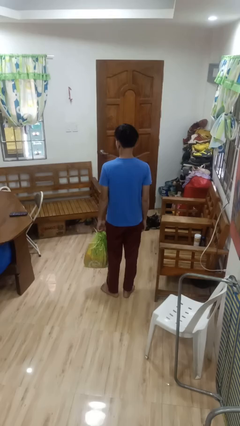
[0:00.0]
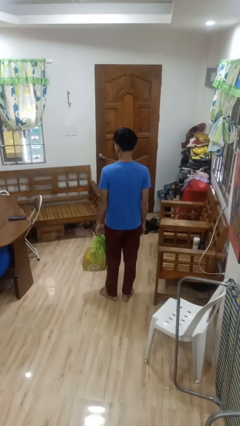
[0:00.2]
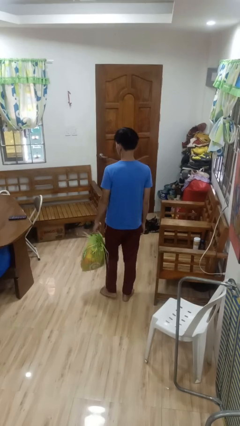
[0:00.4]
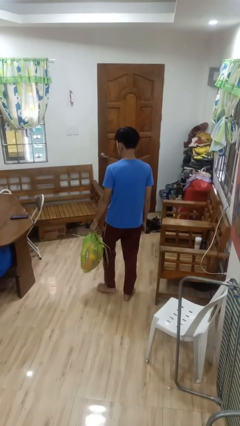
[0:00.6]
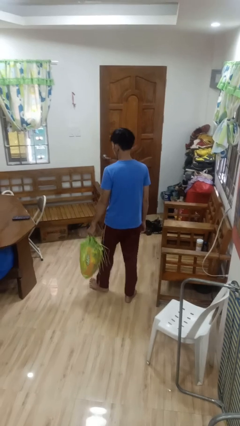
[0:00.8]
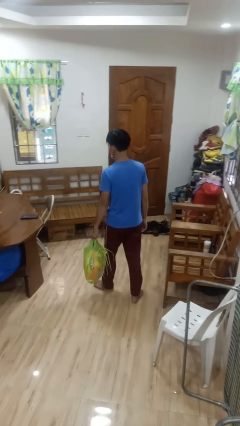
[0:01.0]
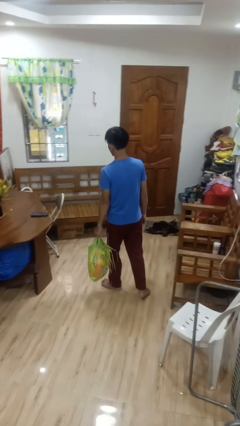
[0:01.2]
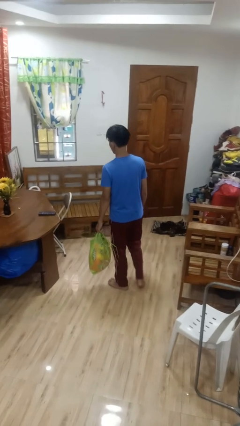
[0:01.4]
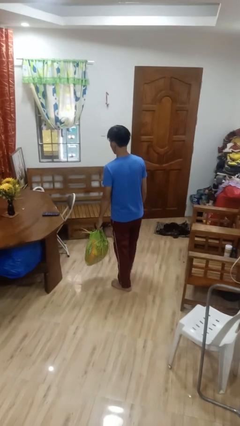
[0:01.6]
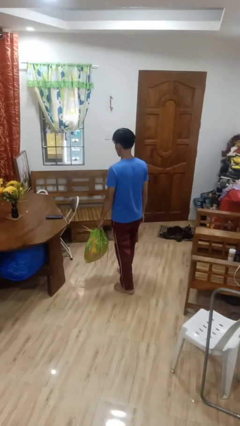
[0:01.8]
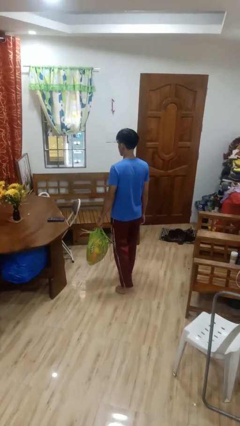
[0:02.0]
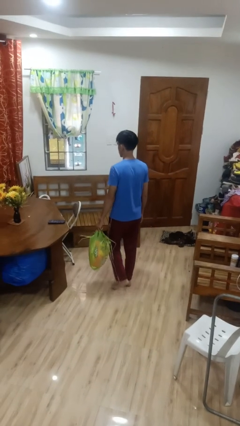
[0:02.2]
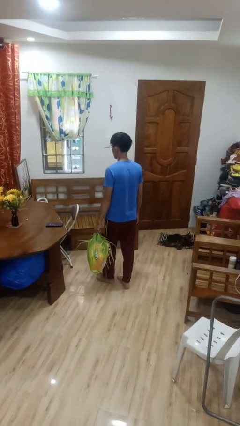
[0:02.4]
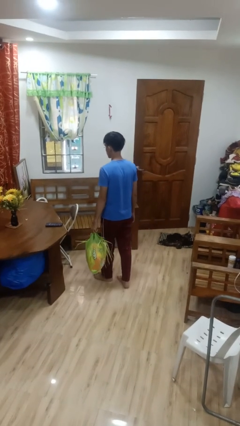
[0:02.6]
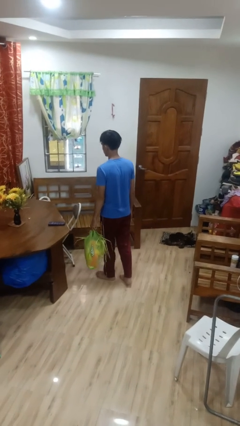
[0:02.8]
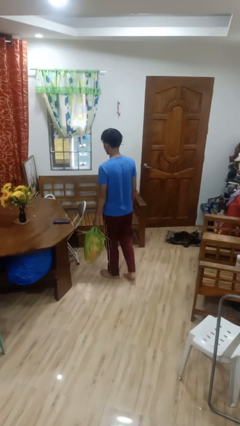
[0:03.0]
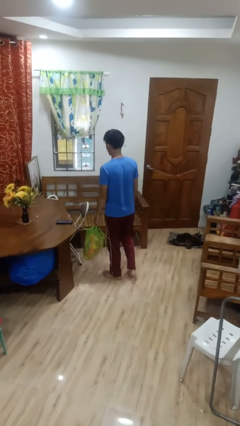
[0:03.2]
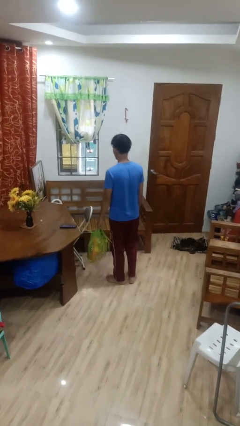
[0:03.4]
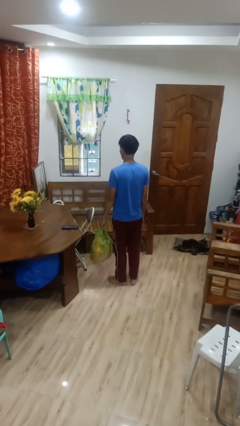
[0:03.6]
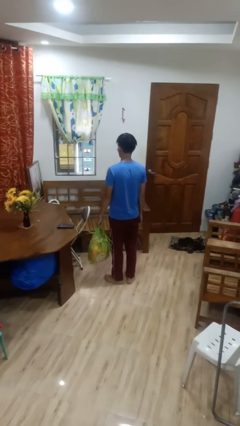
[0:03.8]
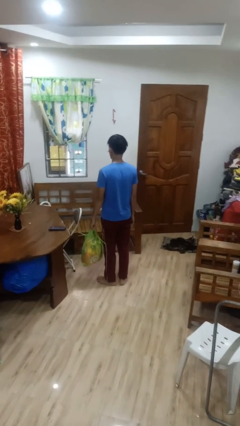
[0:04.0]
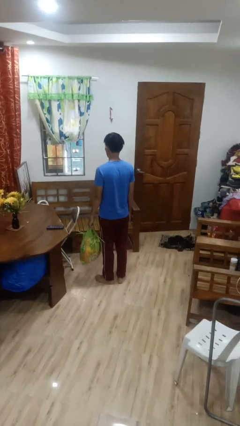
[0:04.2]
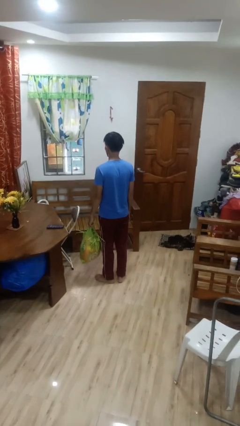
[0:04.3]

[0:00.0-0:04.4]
person carries groceries

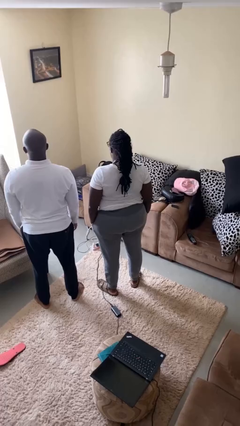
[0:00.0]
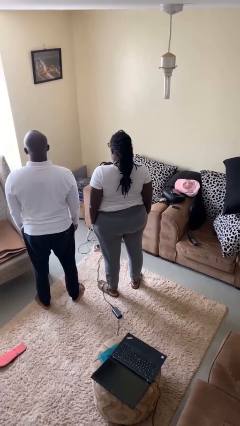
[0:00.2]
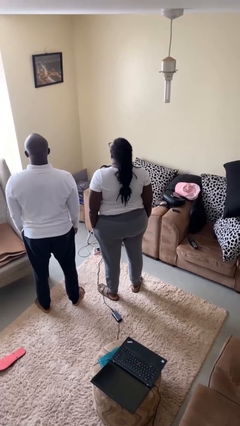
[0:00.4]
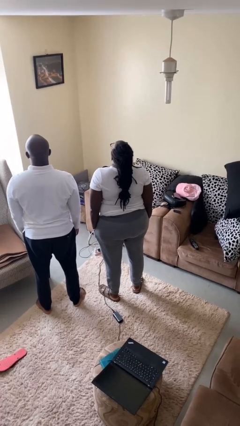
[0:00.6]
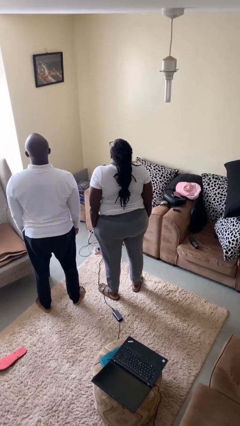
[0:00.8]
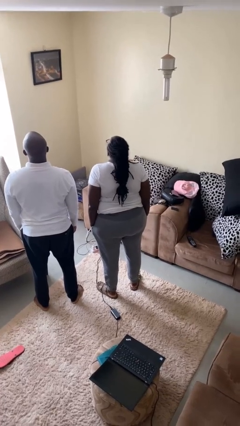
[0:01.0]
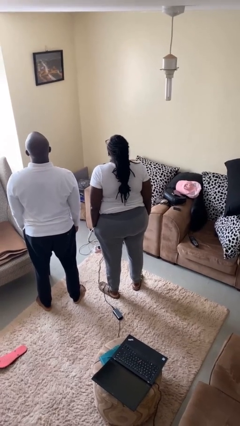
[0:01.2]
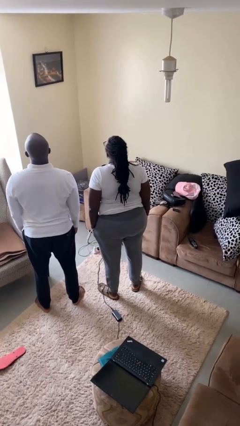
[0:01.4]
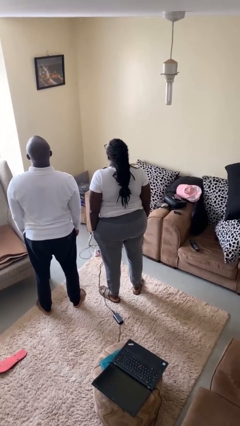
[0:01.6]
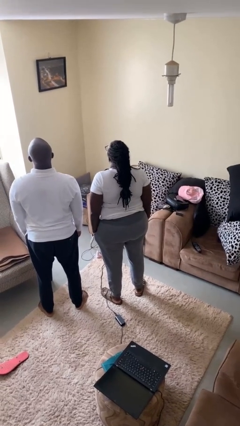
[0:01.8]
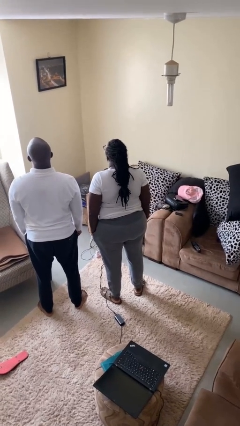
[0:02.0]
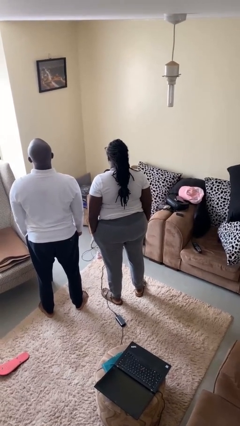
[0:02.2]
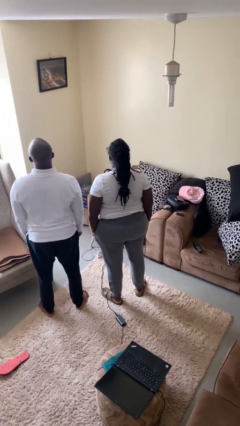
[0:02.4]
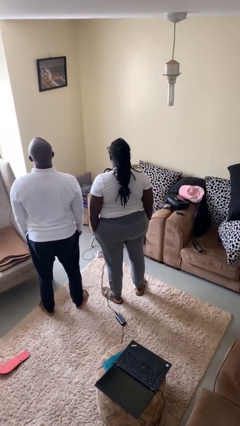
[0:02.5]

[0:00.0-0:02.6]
person laughs with person

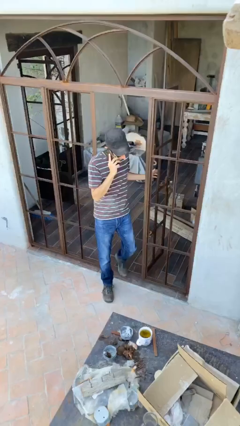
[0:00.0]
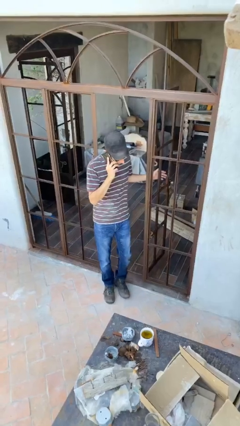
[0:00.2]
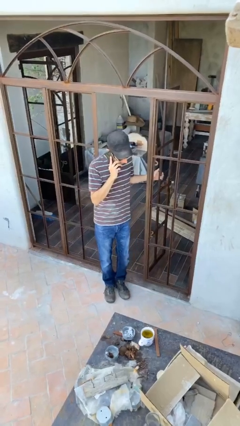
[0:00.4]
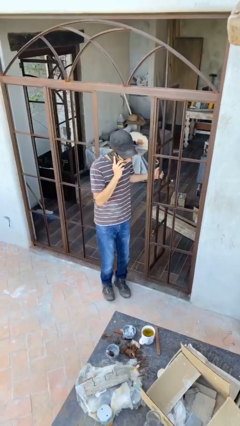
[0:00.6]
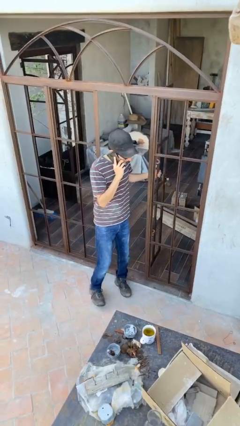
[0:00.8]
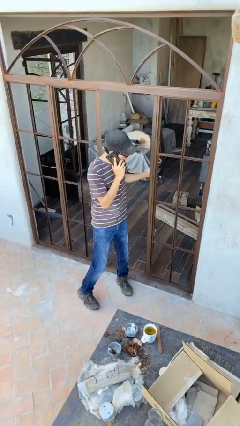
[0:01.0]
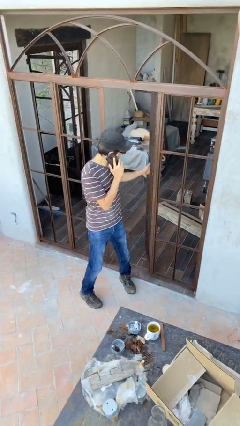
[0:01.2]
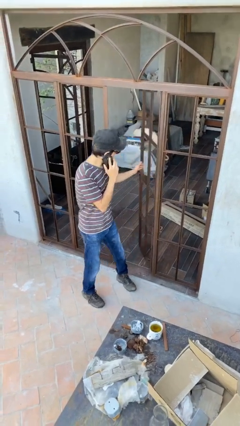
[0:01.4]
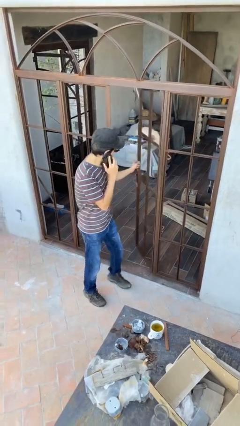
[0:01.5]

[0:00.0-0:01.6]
person enters scene through structure

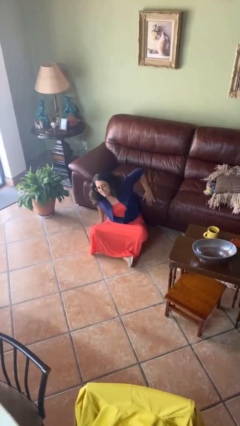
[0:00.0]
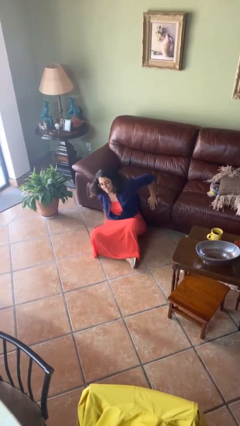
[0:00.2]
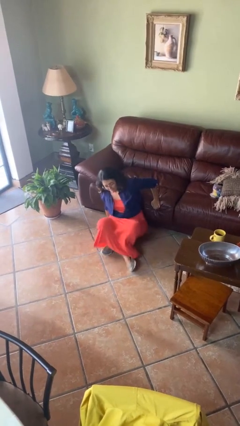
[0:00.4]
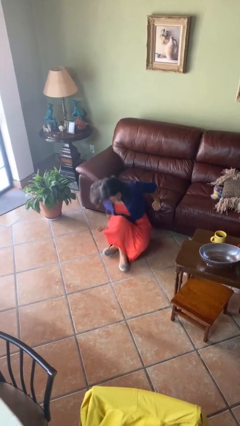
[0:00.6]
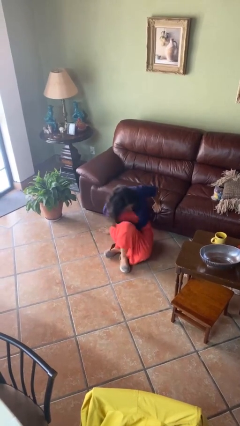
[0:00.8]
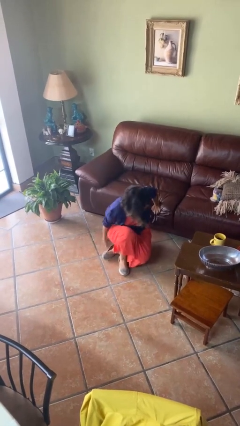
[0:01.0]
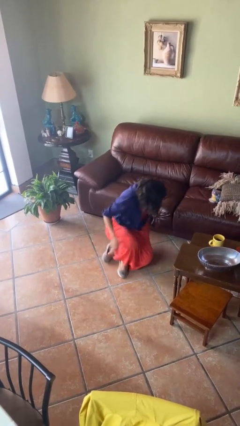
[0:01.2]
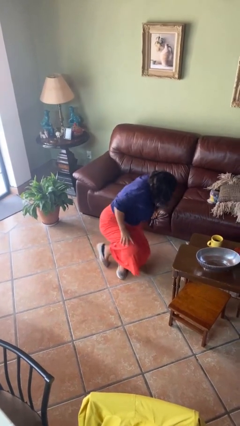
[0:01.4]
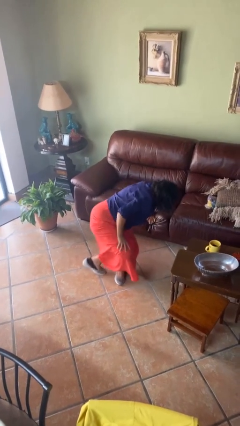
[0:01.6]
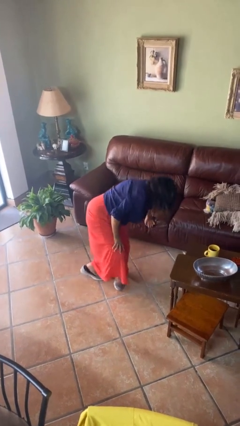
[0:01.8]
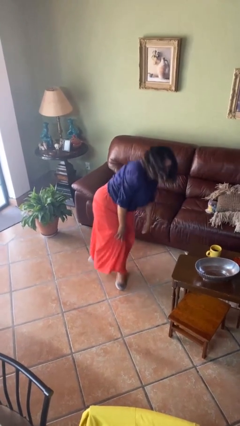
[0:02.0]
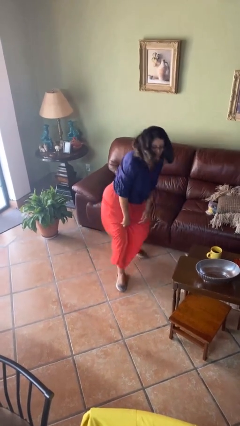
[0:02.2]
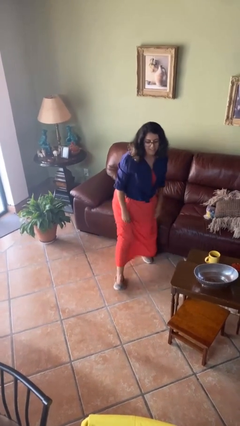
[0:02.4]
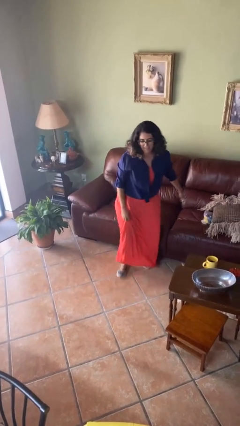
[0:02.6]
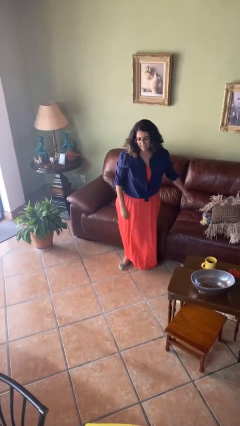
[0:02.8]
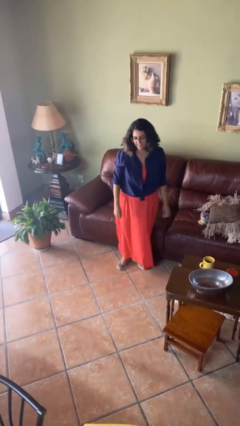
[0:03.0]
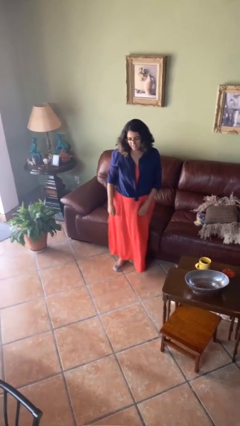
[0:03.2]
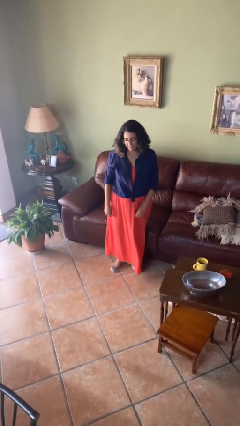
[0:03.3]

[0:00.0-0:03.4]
person stands up from floor

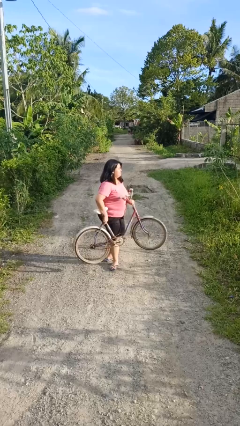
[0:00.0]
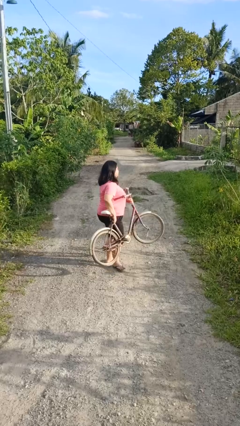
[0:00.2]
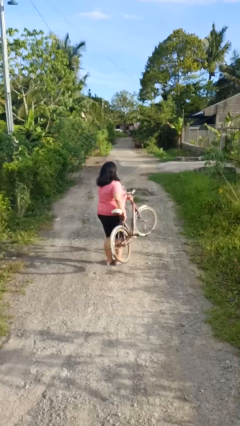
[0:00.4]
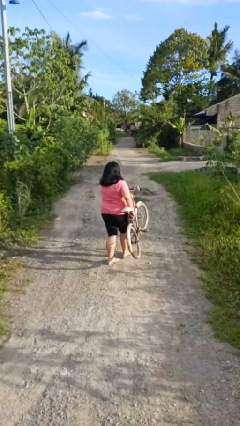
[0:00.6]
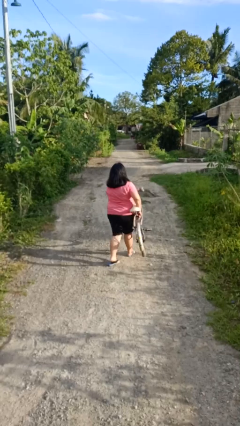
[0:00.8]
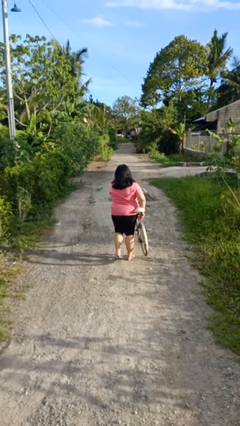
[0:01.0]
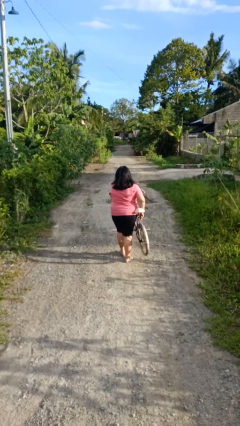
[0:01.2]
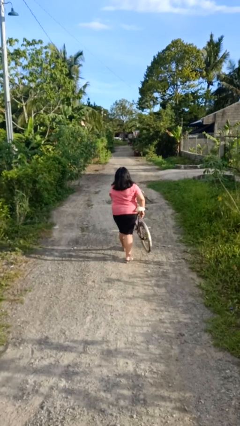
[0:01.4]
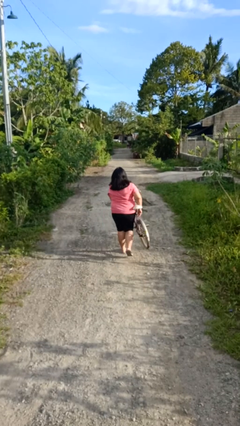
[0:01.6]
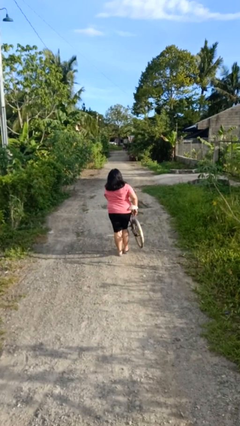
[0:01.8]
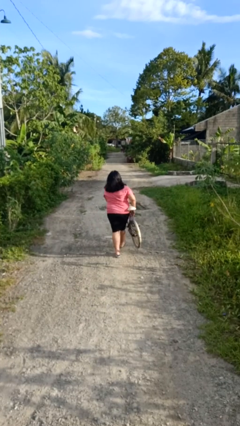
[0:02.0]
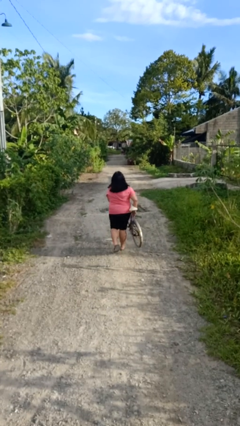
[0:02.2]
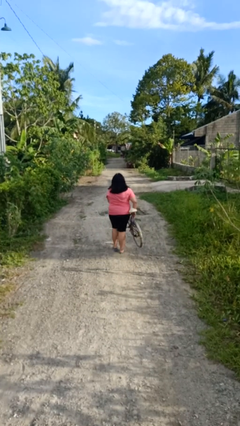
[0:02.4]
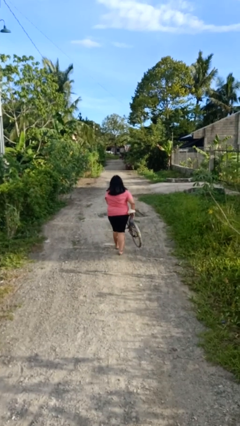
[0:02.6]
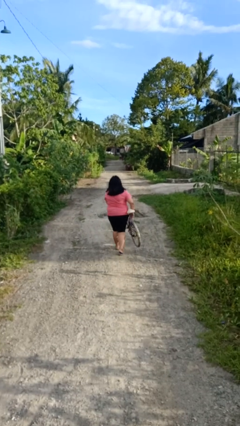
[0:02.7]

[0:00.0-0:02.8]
person carries bicycle

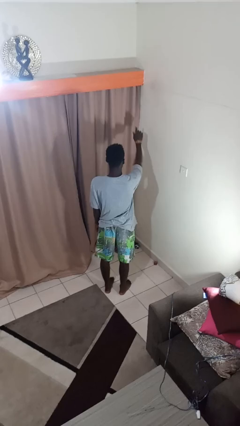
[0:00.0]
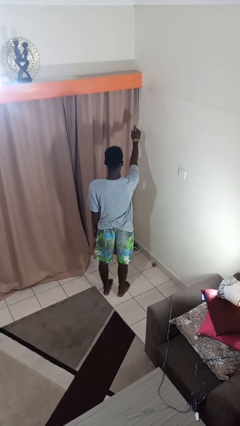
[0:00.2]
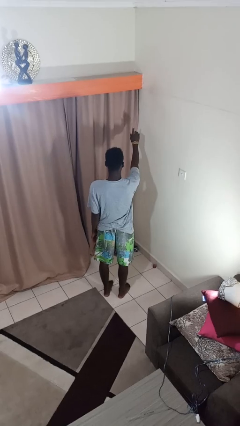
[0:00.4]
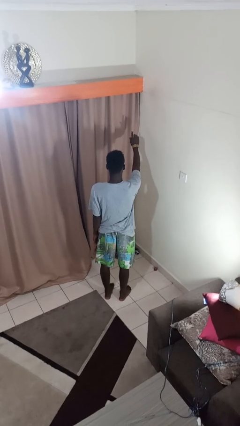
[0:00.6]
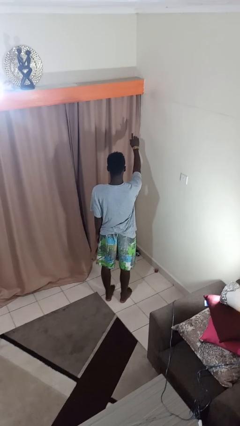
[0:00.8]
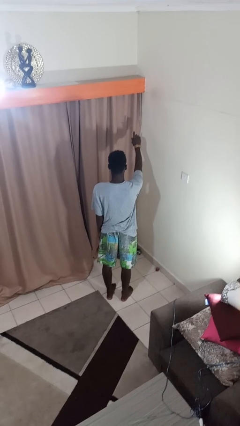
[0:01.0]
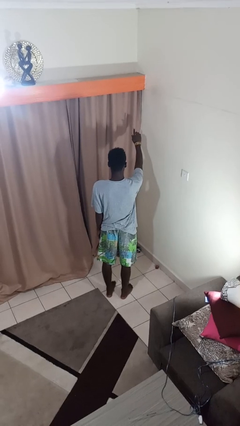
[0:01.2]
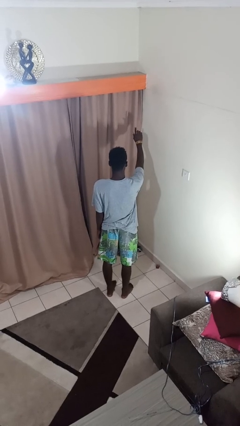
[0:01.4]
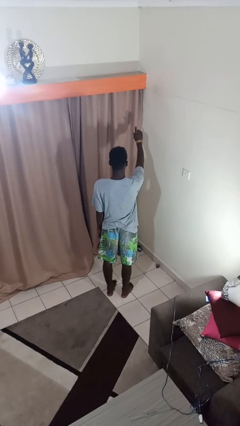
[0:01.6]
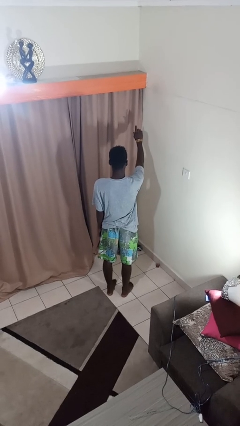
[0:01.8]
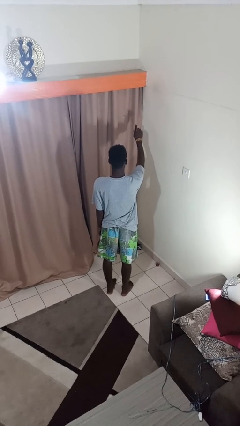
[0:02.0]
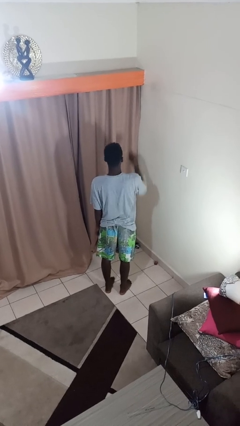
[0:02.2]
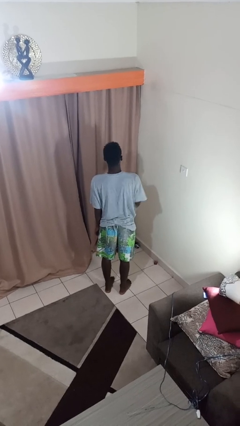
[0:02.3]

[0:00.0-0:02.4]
person gestures number one

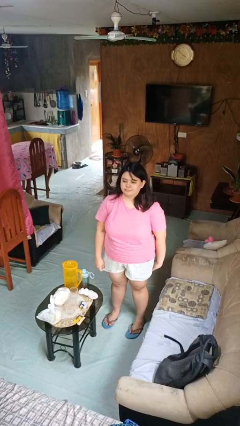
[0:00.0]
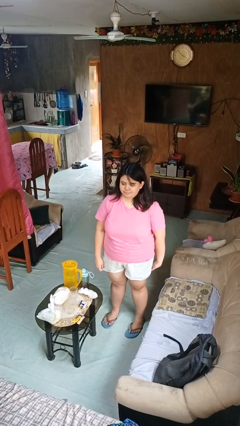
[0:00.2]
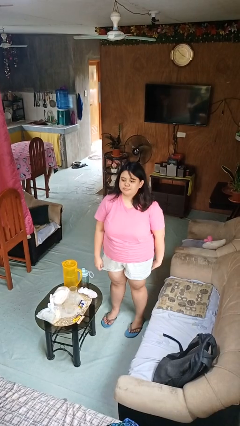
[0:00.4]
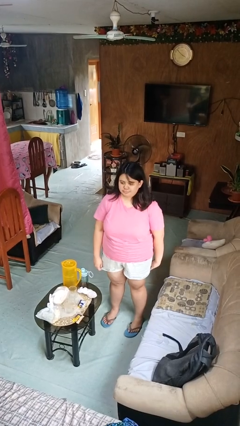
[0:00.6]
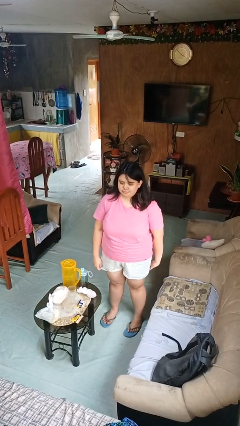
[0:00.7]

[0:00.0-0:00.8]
person nods head
